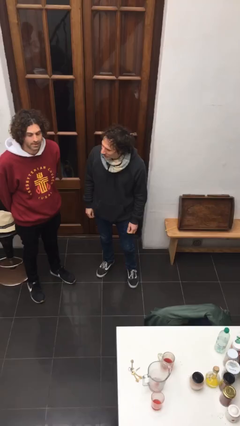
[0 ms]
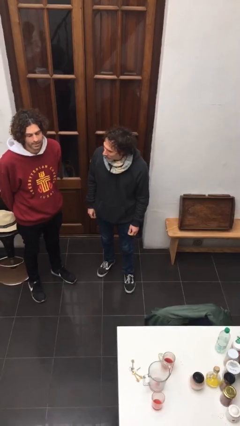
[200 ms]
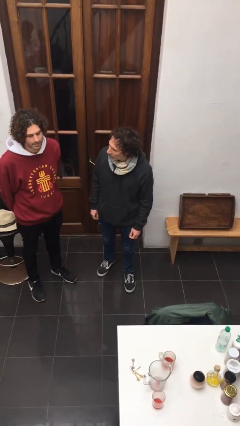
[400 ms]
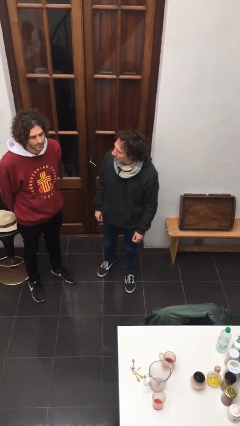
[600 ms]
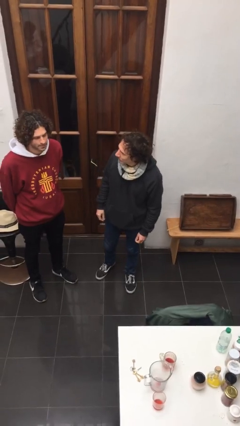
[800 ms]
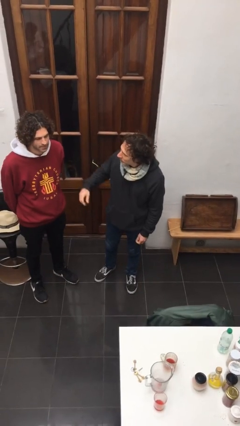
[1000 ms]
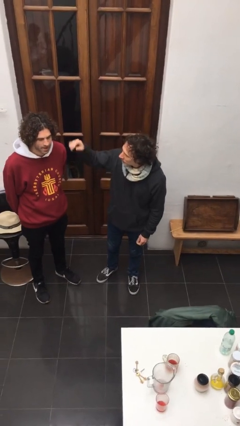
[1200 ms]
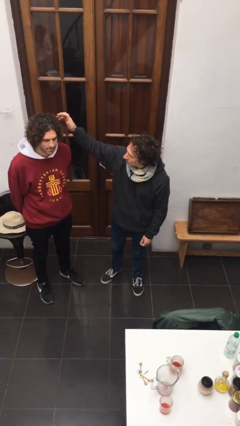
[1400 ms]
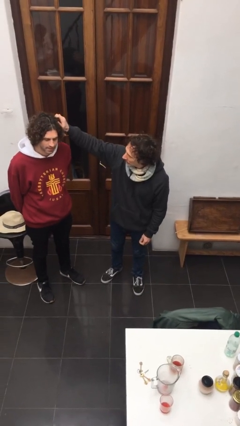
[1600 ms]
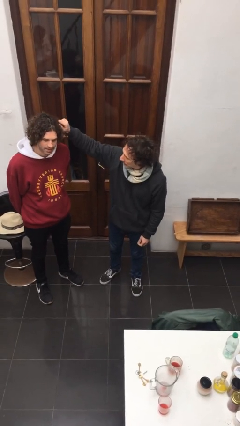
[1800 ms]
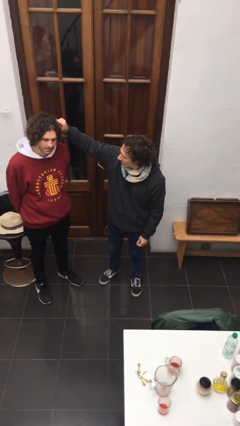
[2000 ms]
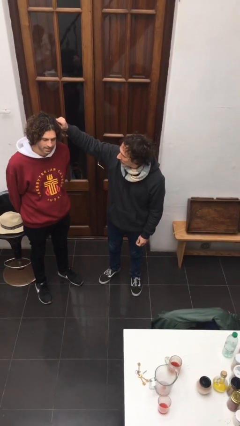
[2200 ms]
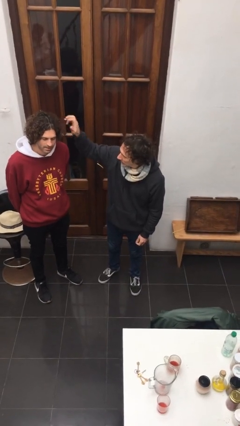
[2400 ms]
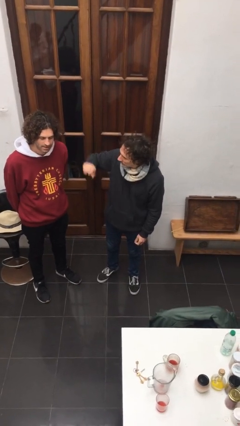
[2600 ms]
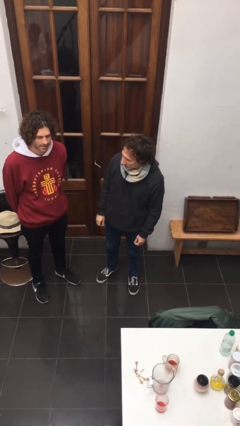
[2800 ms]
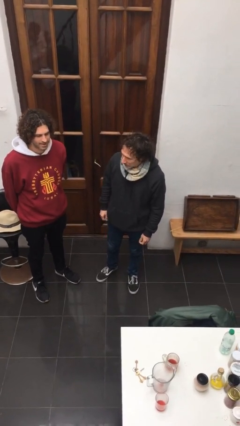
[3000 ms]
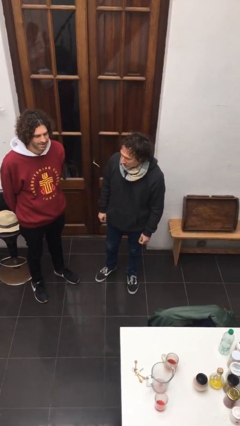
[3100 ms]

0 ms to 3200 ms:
person grabs person by hair

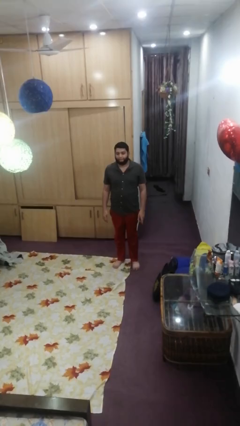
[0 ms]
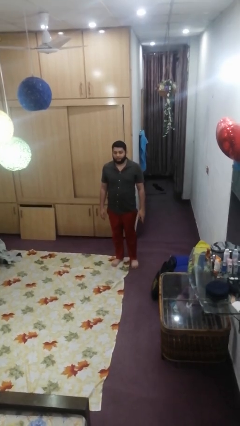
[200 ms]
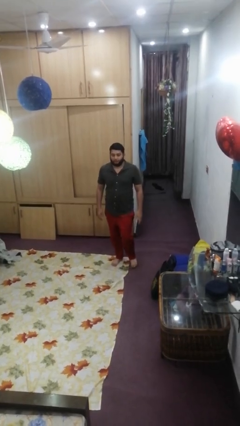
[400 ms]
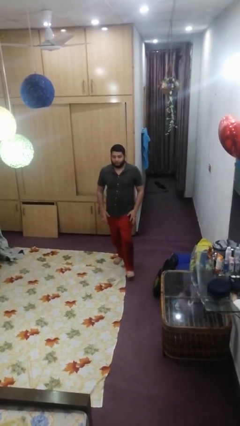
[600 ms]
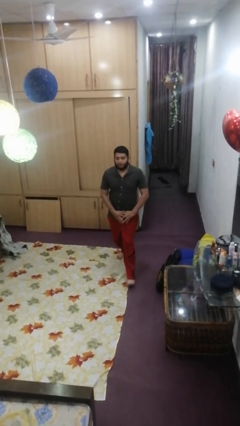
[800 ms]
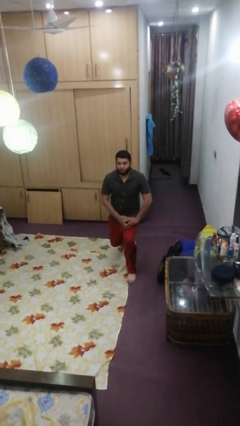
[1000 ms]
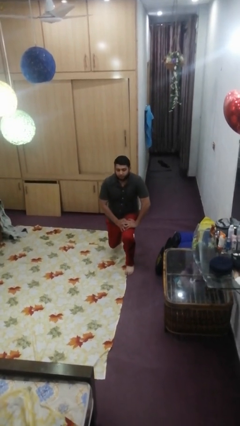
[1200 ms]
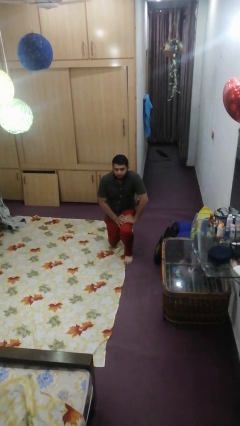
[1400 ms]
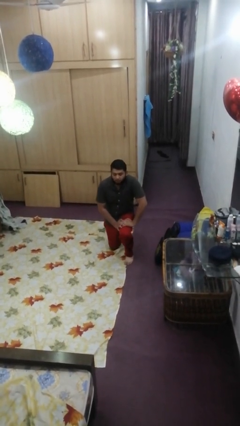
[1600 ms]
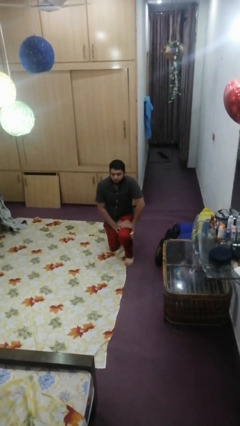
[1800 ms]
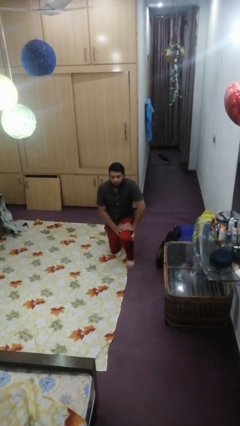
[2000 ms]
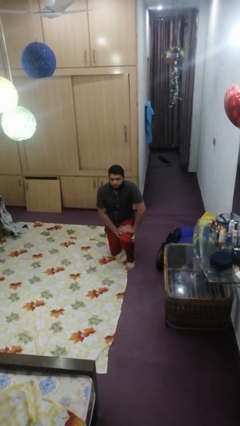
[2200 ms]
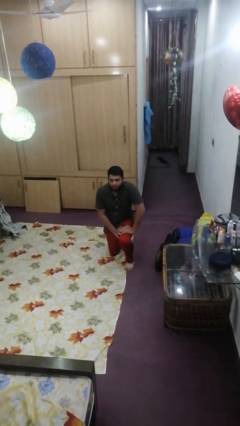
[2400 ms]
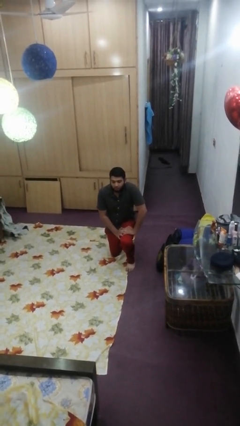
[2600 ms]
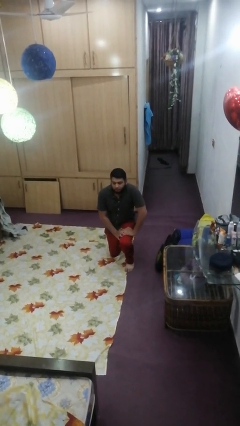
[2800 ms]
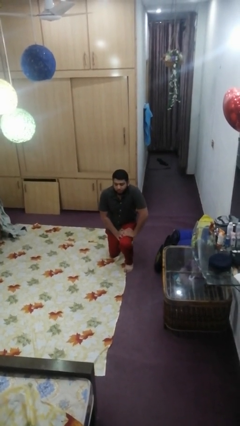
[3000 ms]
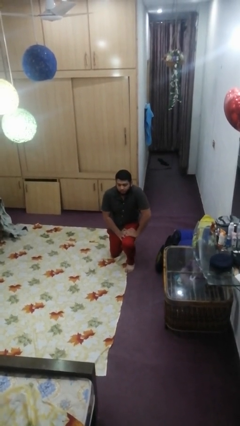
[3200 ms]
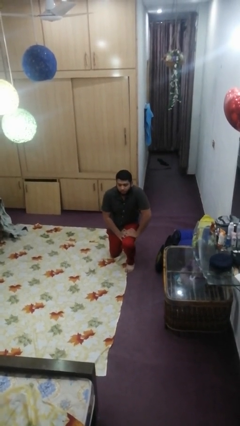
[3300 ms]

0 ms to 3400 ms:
person kneels

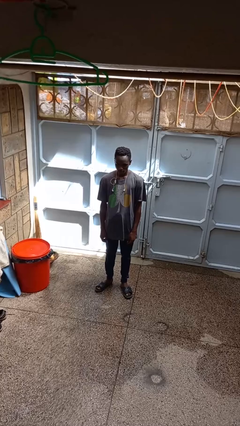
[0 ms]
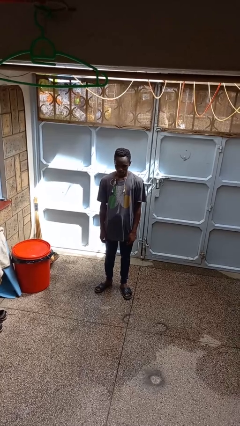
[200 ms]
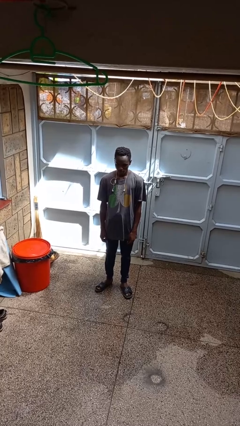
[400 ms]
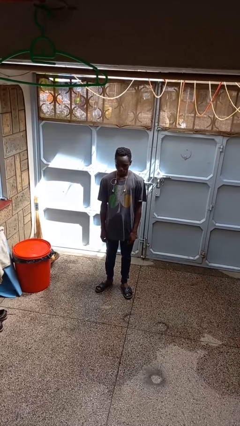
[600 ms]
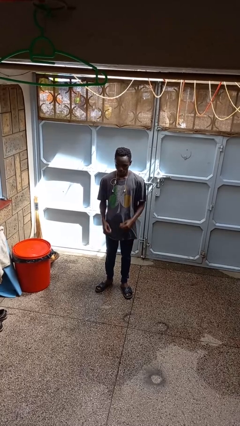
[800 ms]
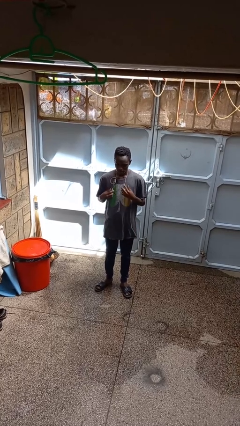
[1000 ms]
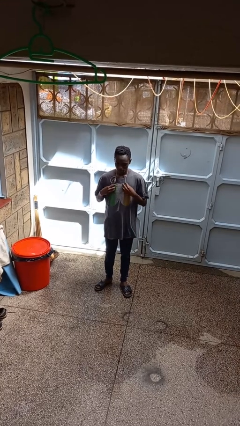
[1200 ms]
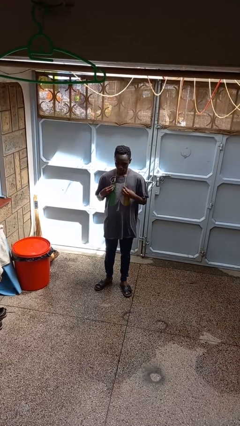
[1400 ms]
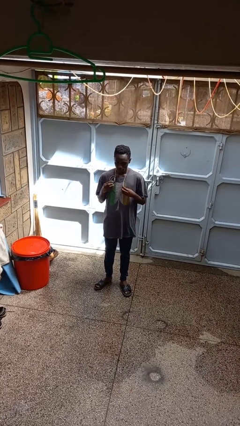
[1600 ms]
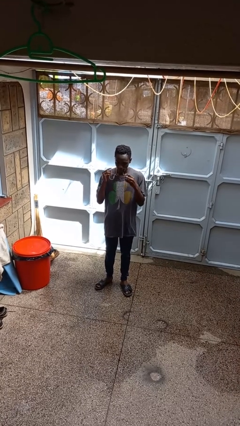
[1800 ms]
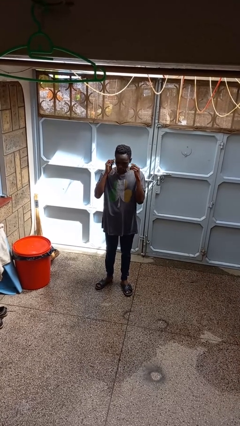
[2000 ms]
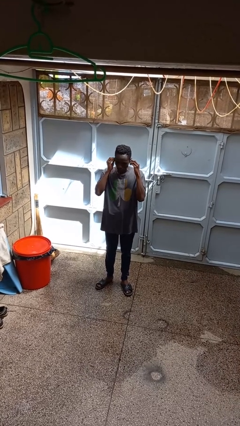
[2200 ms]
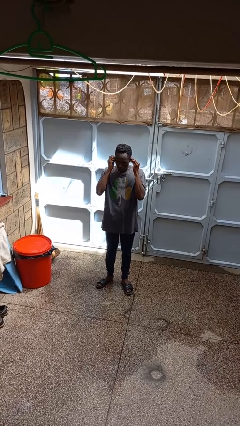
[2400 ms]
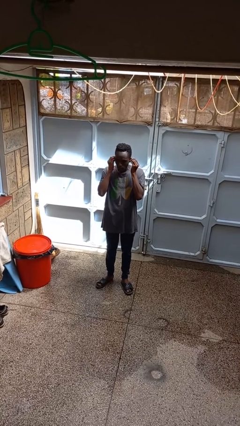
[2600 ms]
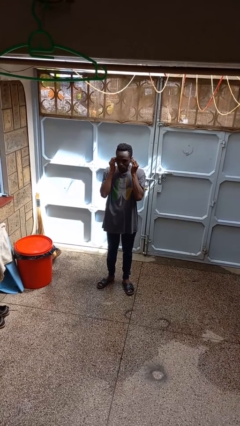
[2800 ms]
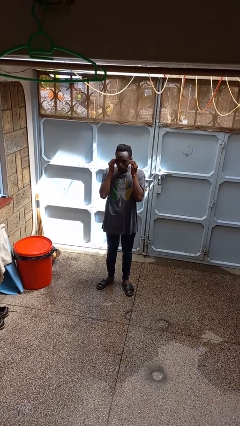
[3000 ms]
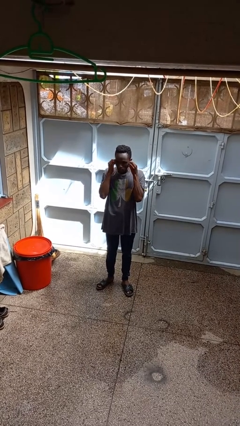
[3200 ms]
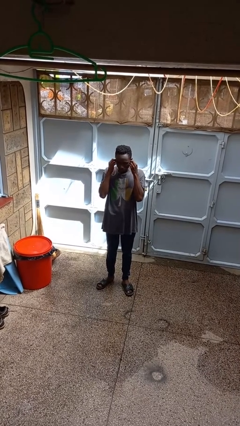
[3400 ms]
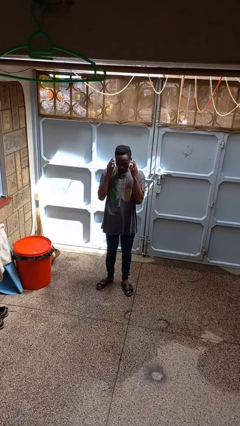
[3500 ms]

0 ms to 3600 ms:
person puts on headphones

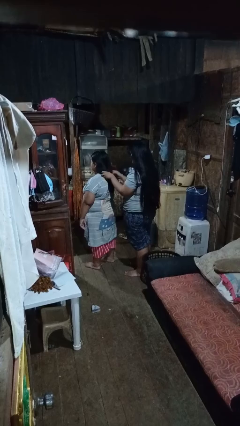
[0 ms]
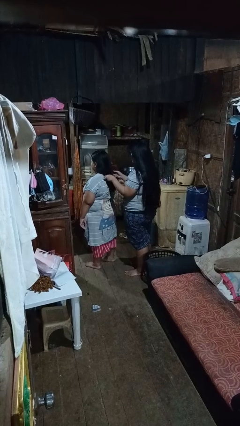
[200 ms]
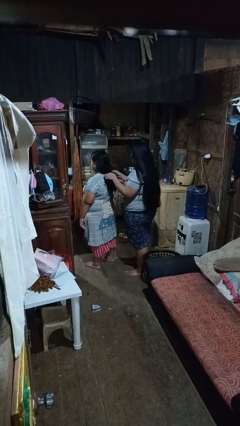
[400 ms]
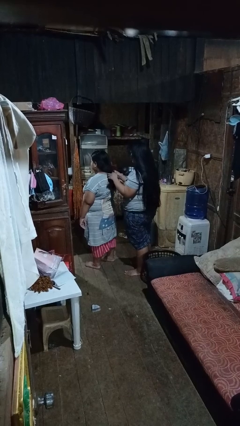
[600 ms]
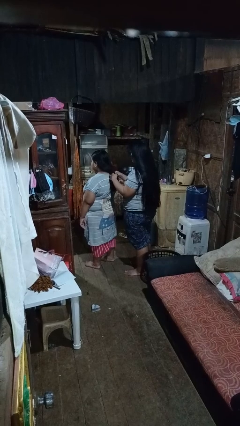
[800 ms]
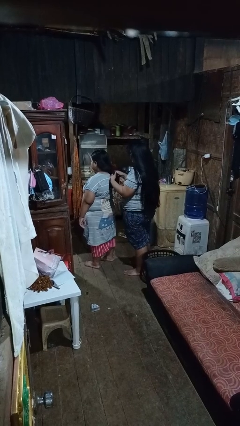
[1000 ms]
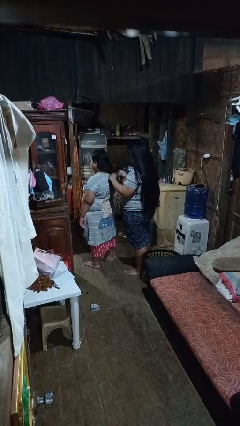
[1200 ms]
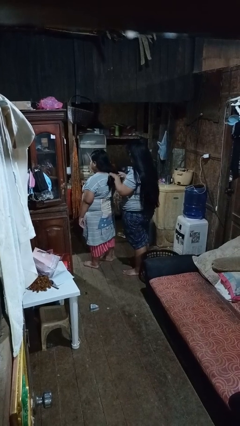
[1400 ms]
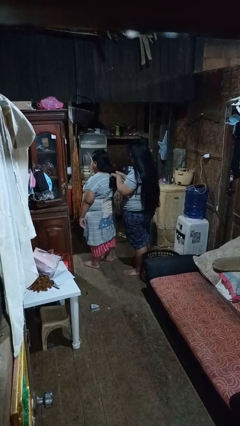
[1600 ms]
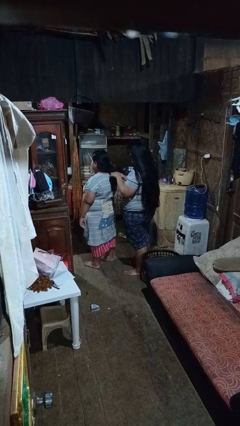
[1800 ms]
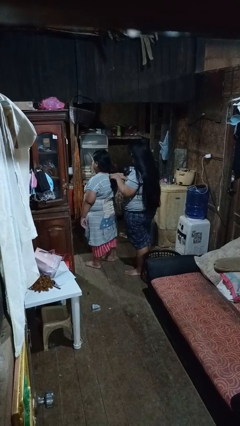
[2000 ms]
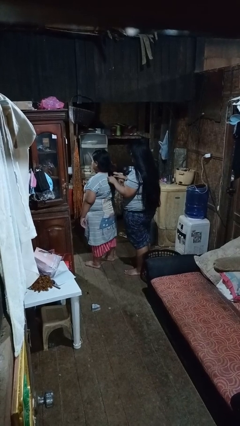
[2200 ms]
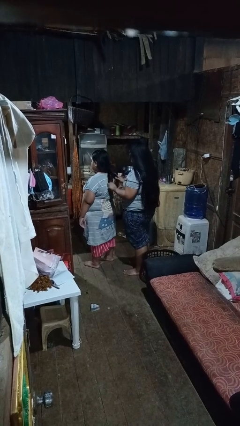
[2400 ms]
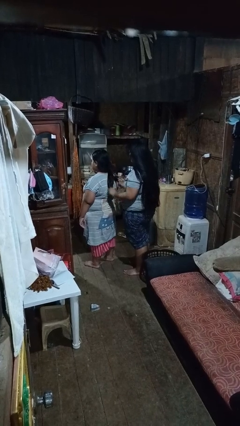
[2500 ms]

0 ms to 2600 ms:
person braids hair of person

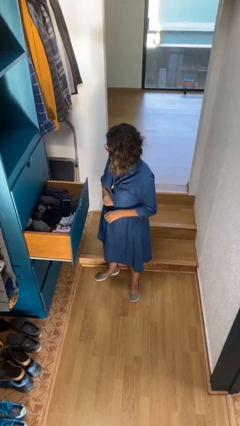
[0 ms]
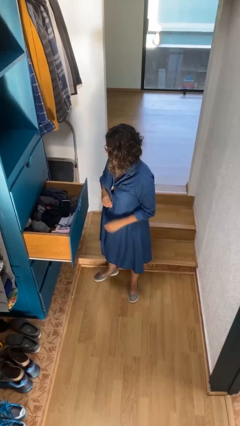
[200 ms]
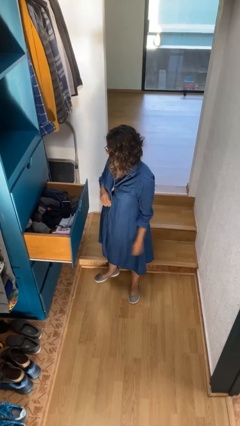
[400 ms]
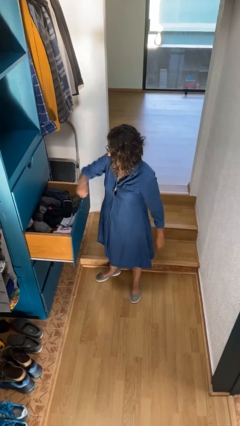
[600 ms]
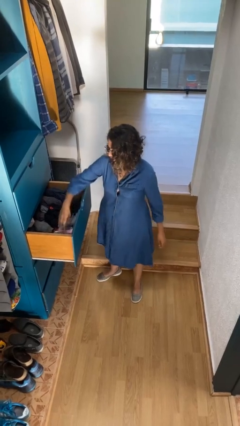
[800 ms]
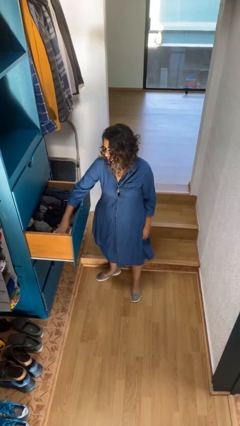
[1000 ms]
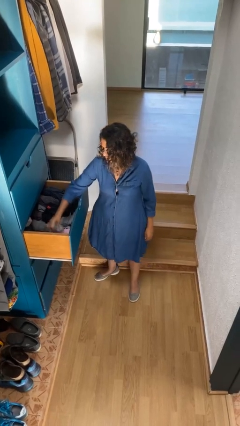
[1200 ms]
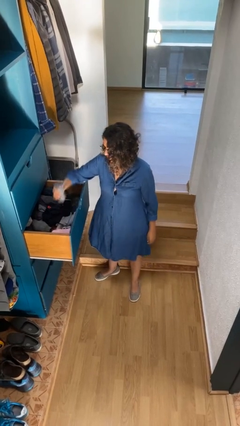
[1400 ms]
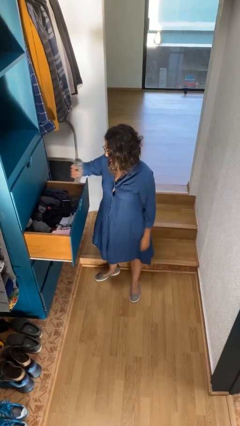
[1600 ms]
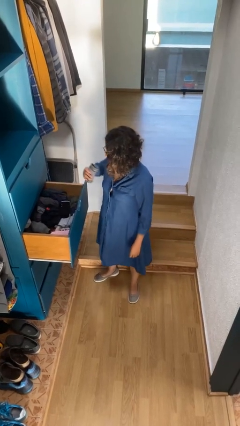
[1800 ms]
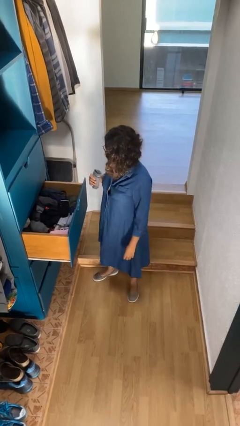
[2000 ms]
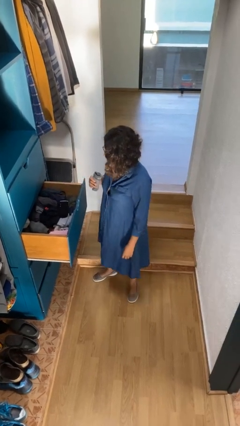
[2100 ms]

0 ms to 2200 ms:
person takes clothes from dresser

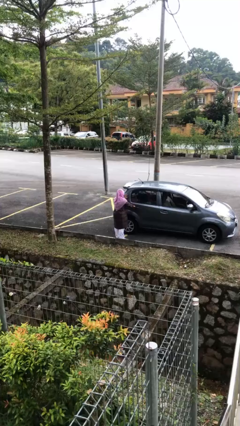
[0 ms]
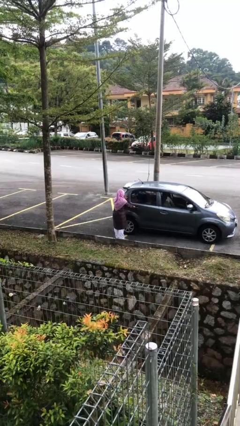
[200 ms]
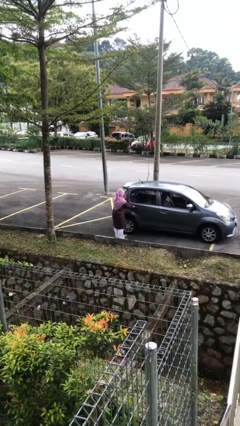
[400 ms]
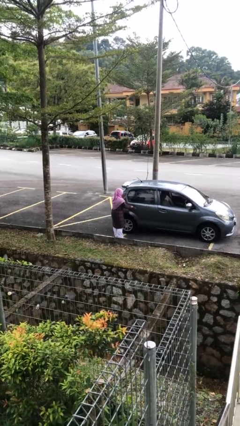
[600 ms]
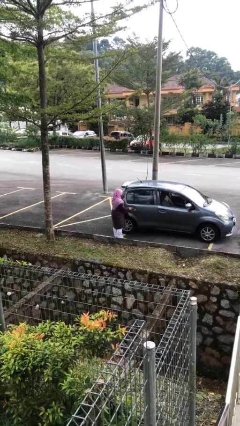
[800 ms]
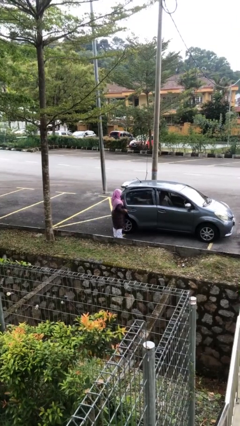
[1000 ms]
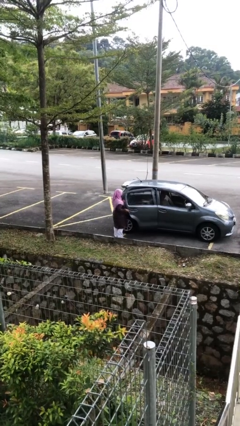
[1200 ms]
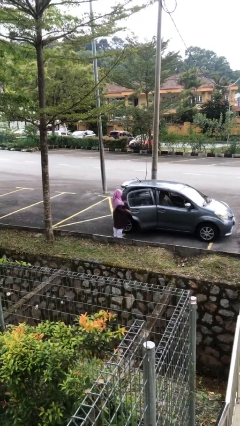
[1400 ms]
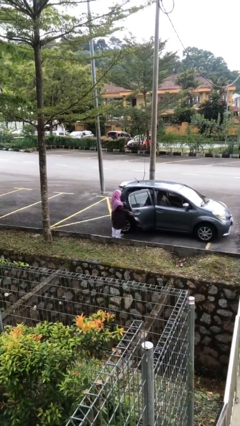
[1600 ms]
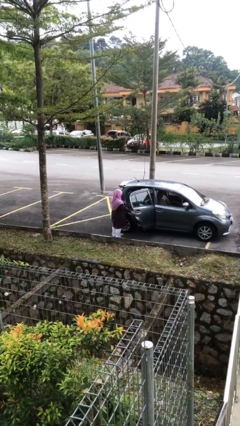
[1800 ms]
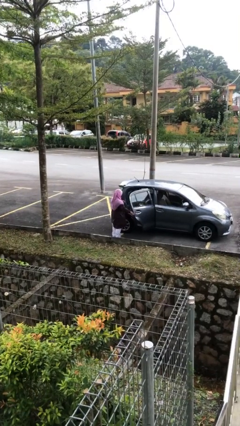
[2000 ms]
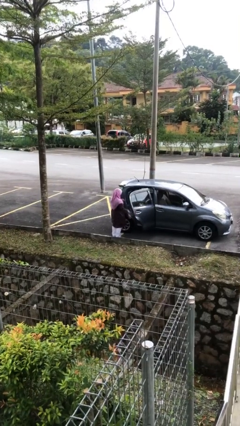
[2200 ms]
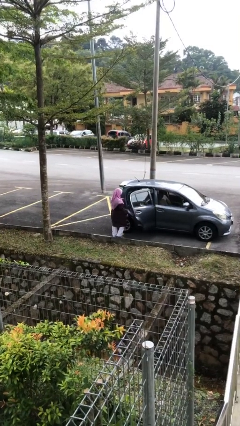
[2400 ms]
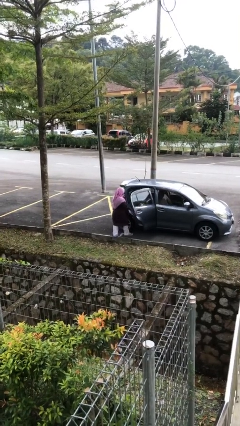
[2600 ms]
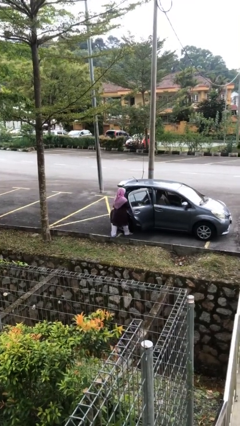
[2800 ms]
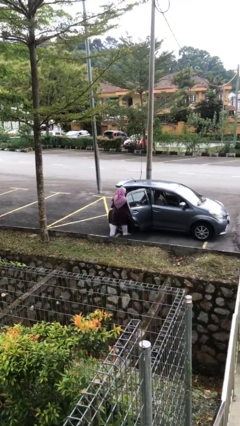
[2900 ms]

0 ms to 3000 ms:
person opens car door
